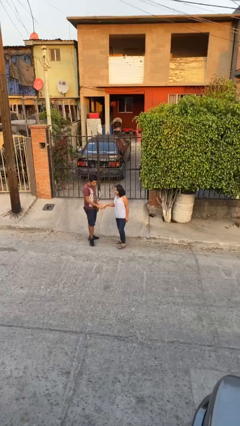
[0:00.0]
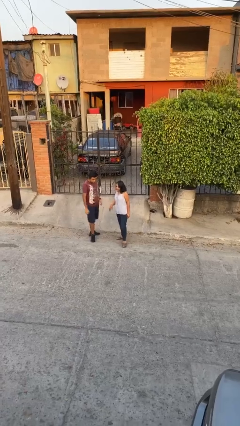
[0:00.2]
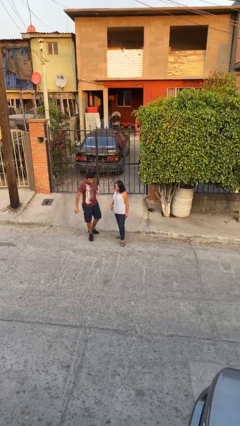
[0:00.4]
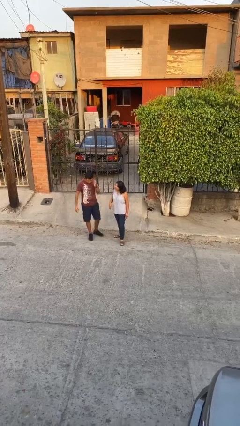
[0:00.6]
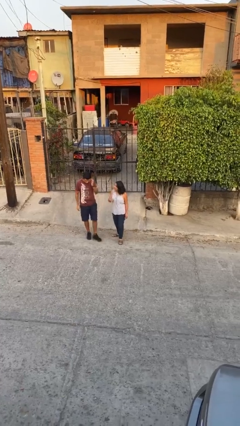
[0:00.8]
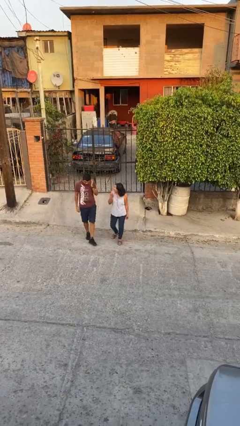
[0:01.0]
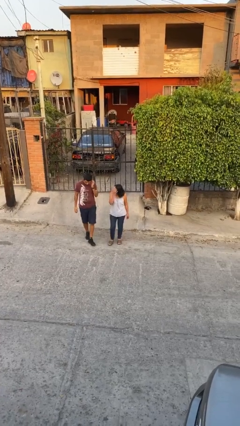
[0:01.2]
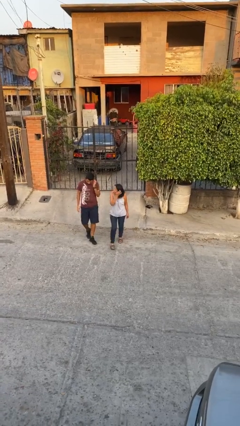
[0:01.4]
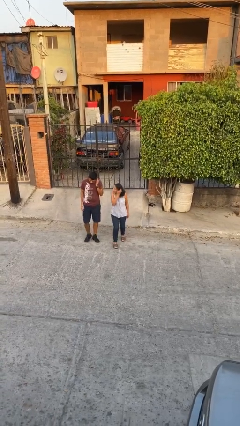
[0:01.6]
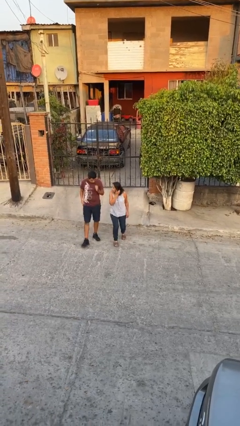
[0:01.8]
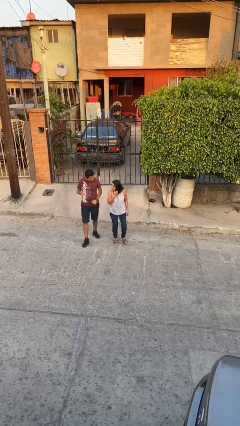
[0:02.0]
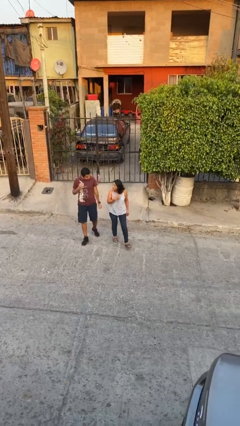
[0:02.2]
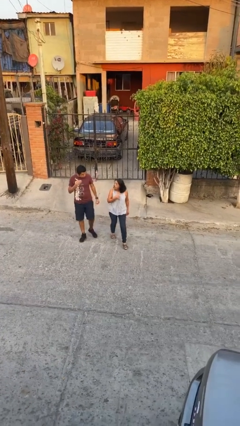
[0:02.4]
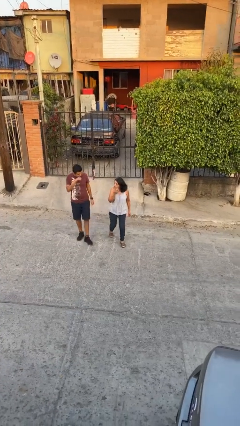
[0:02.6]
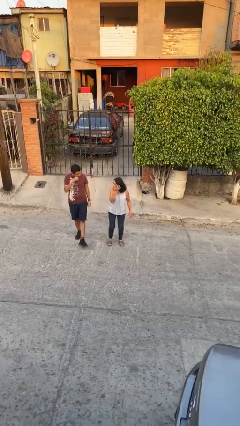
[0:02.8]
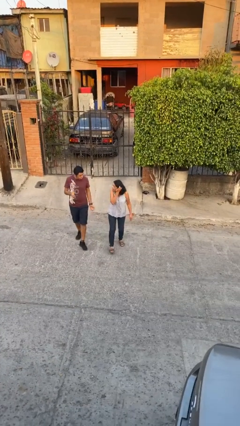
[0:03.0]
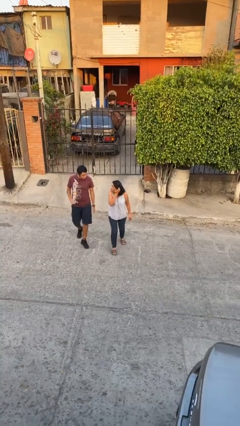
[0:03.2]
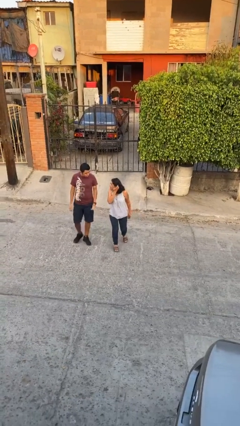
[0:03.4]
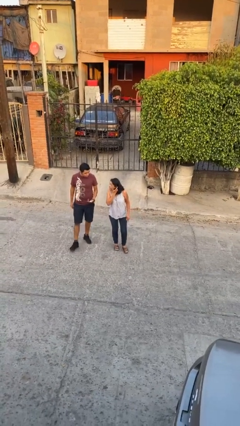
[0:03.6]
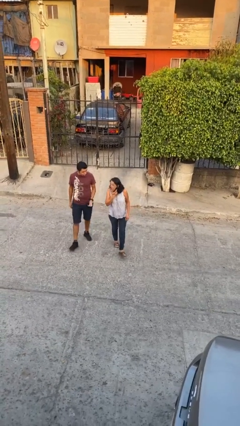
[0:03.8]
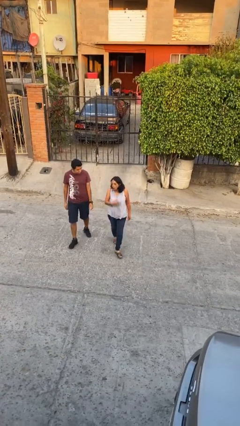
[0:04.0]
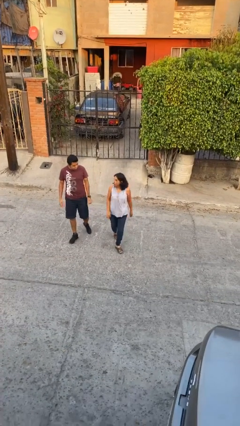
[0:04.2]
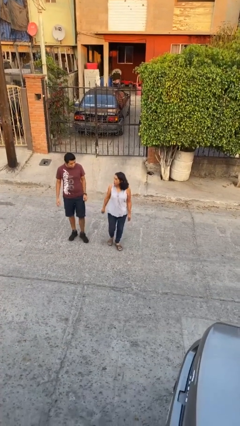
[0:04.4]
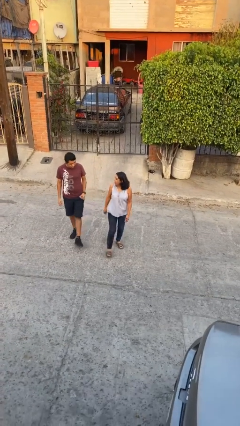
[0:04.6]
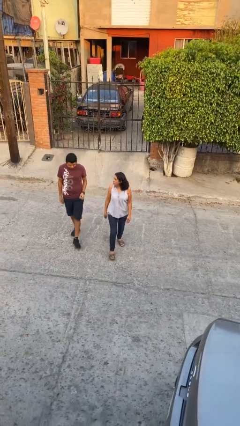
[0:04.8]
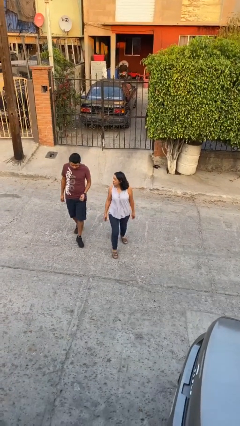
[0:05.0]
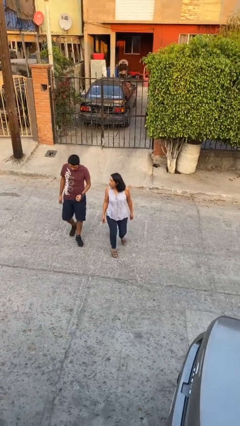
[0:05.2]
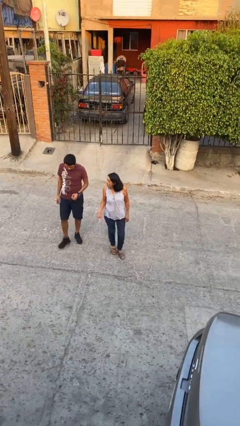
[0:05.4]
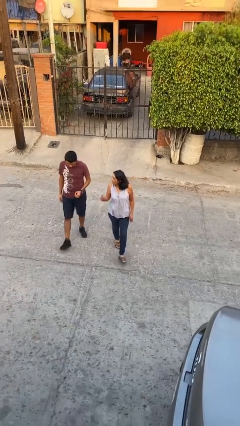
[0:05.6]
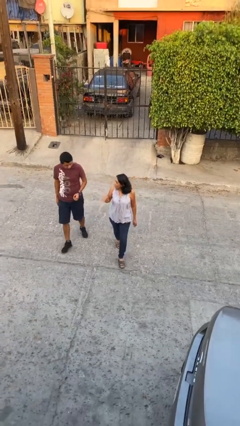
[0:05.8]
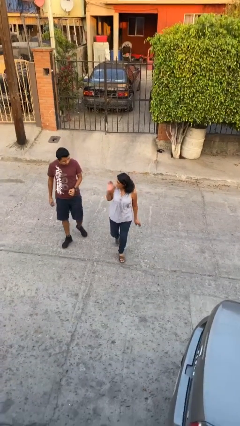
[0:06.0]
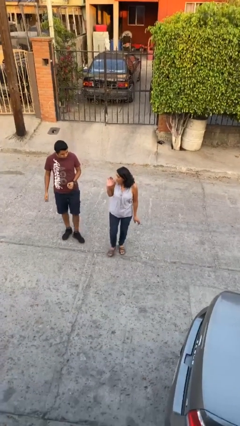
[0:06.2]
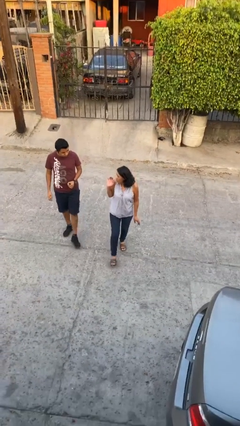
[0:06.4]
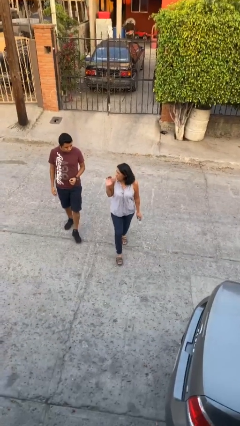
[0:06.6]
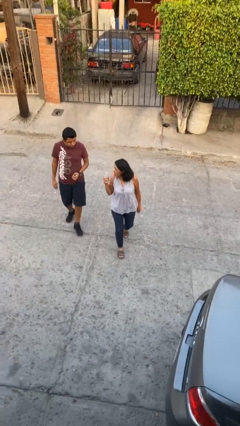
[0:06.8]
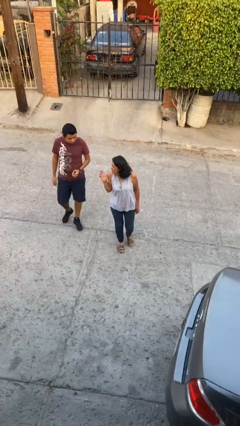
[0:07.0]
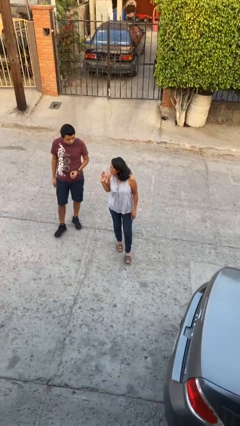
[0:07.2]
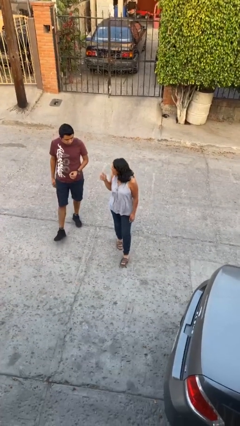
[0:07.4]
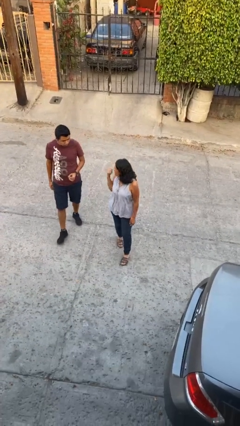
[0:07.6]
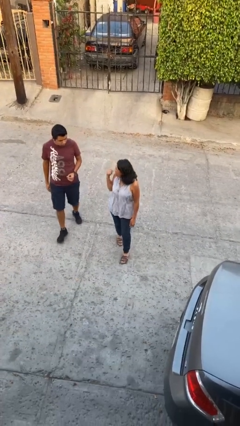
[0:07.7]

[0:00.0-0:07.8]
person talks to person

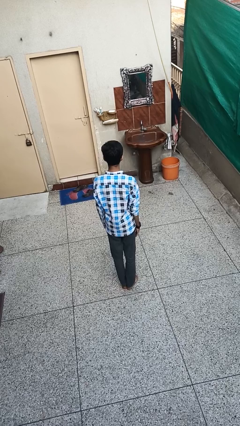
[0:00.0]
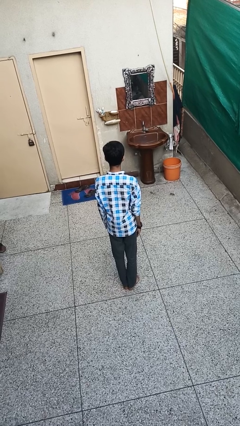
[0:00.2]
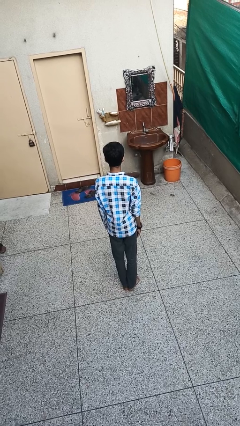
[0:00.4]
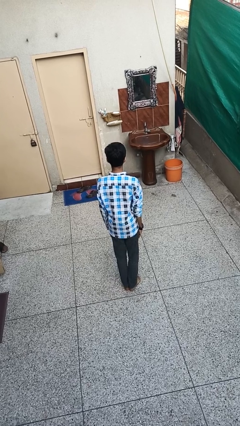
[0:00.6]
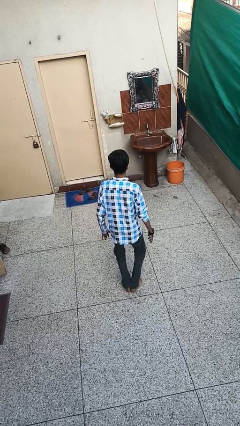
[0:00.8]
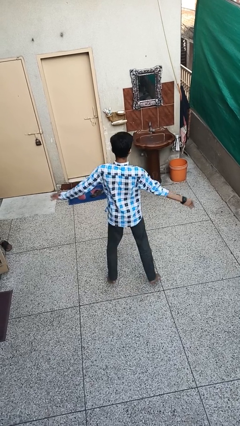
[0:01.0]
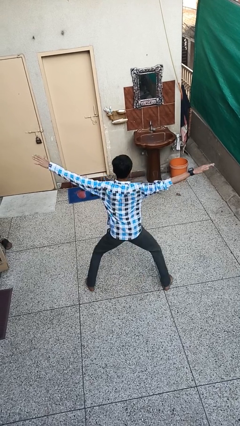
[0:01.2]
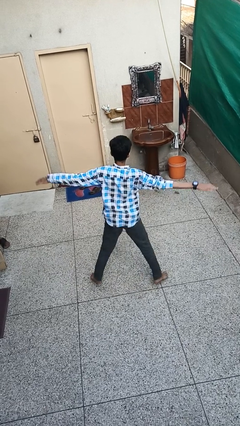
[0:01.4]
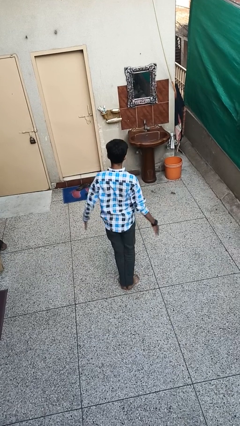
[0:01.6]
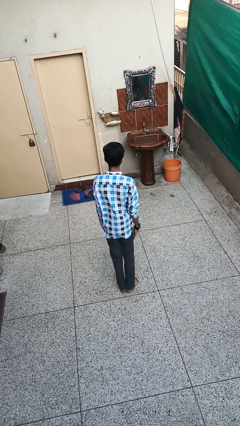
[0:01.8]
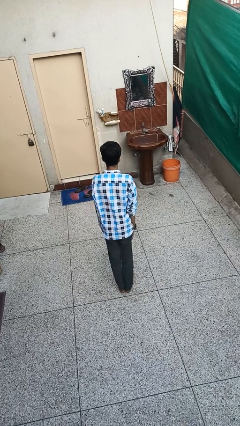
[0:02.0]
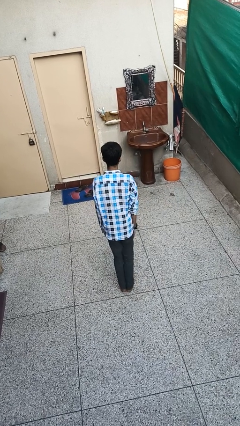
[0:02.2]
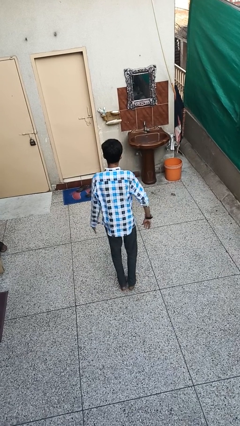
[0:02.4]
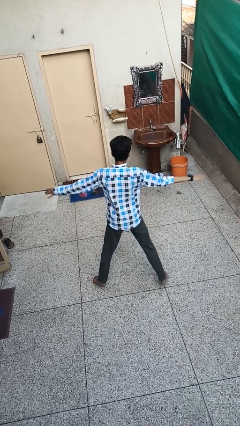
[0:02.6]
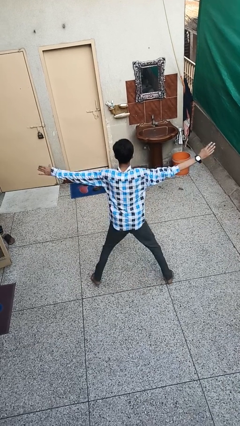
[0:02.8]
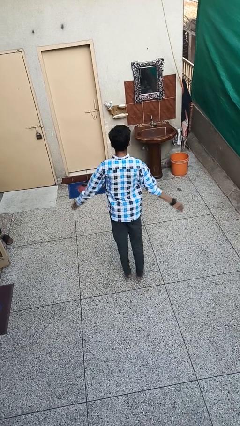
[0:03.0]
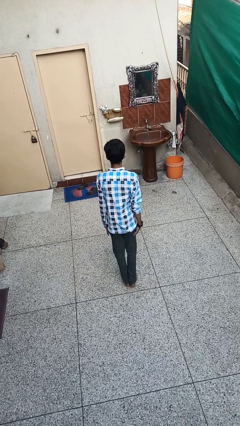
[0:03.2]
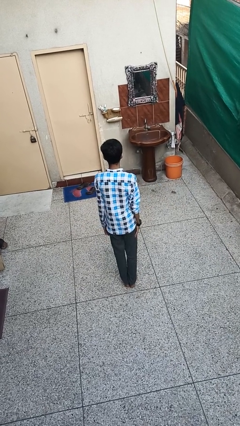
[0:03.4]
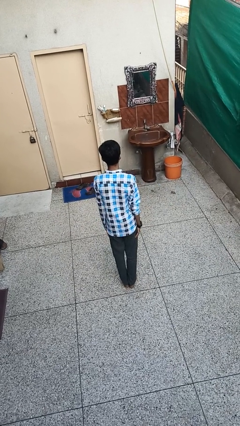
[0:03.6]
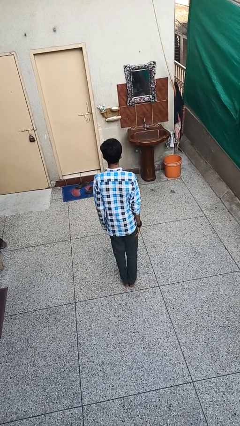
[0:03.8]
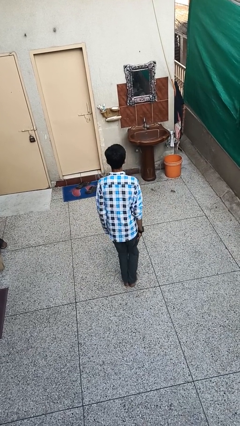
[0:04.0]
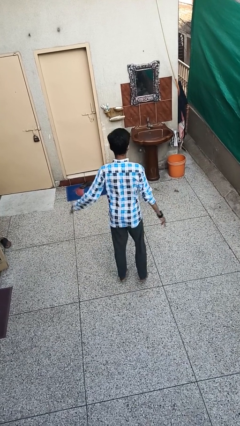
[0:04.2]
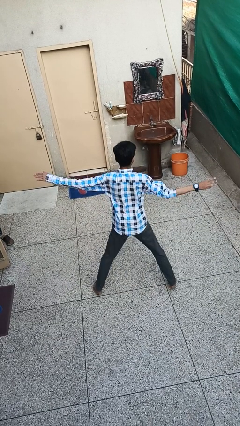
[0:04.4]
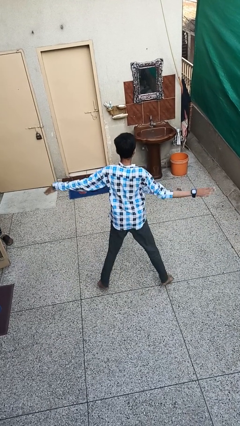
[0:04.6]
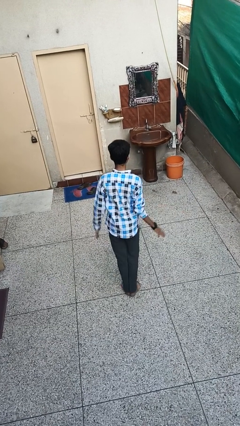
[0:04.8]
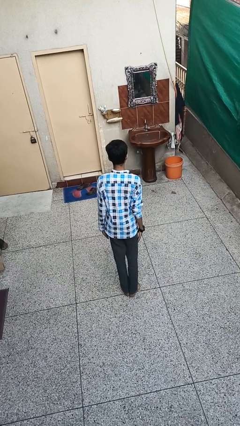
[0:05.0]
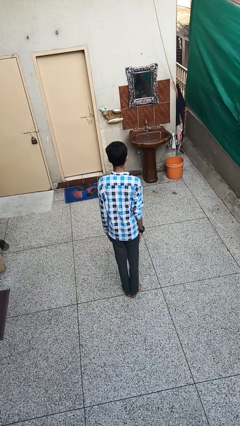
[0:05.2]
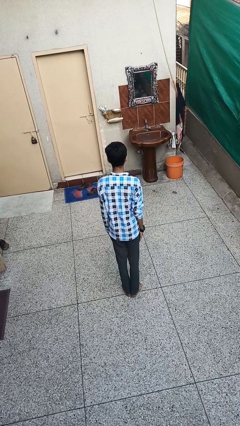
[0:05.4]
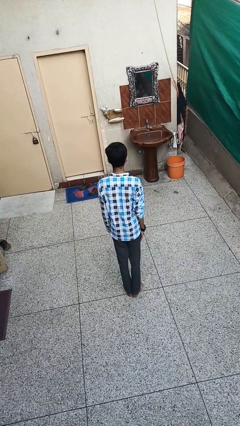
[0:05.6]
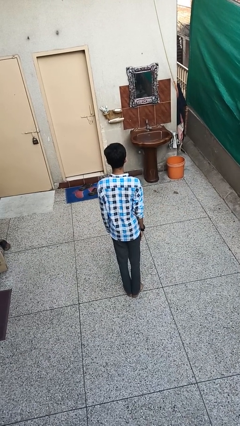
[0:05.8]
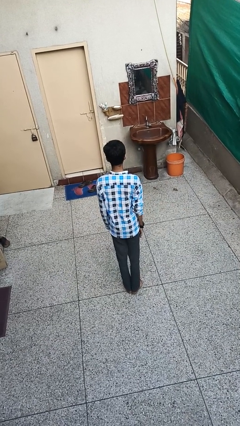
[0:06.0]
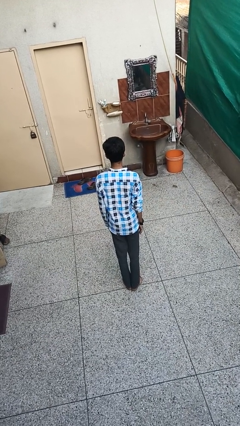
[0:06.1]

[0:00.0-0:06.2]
person exercises with jumping jacks

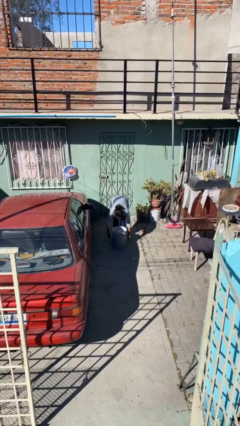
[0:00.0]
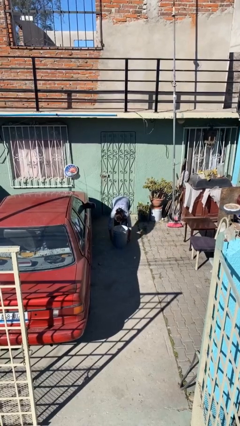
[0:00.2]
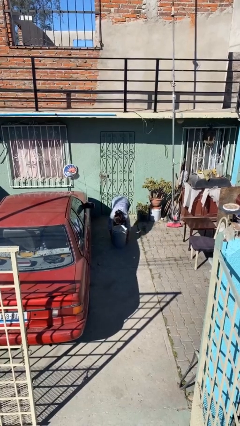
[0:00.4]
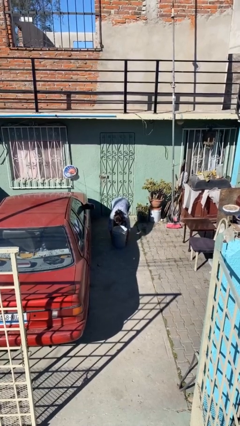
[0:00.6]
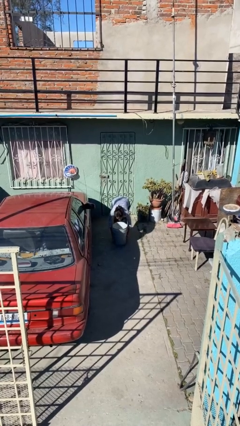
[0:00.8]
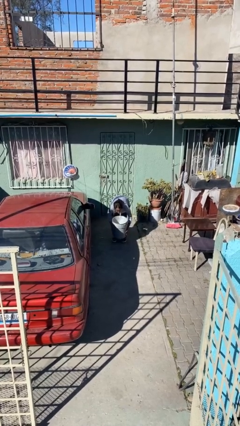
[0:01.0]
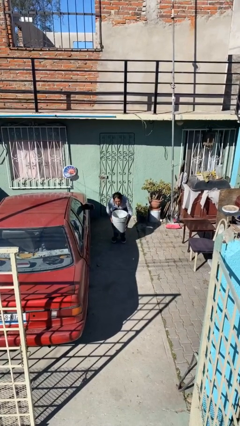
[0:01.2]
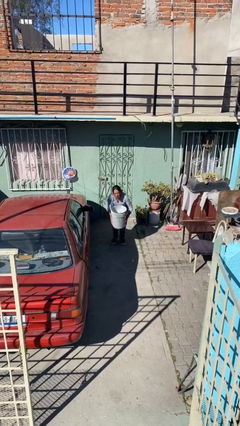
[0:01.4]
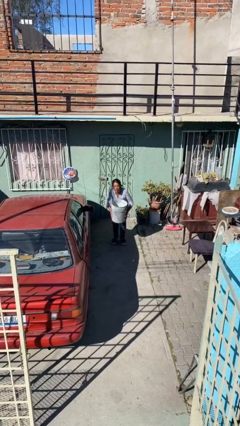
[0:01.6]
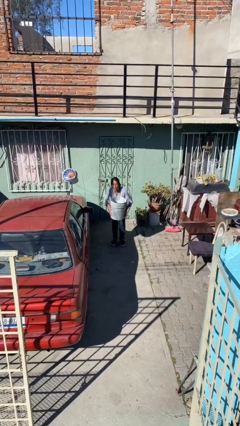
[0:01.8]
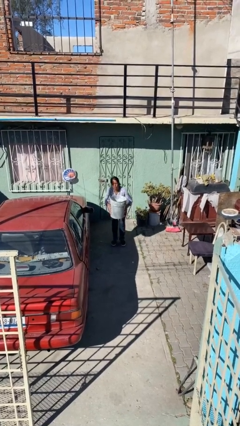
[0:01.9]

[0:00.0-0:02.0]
person picks up object from floor

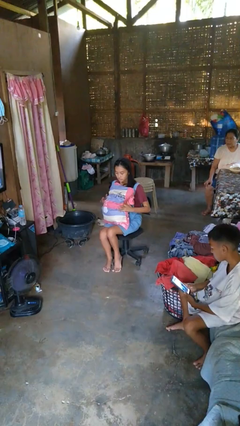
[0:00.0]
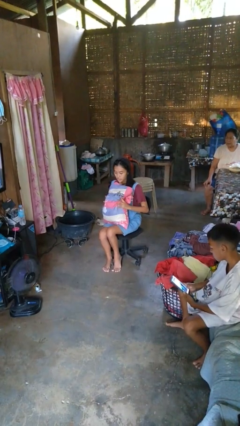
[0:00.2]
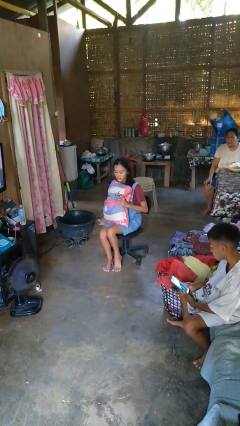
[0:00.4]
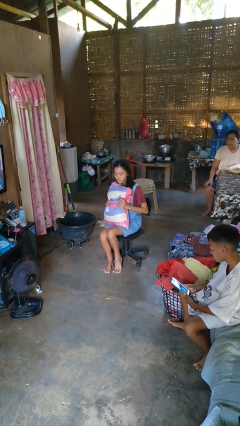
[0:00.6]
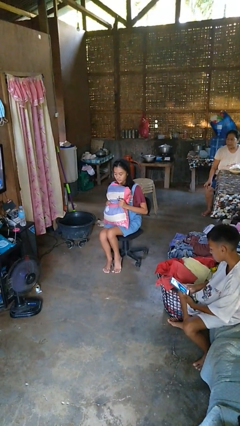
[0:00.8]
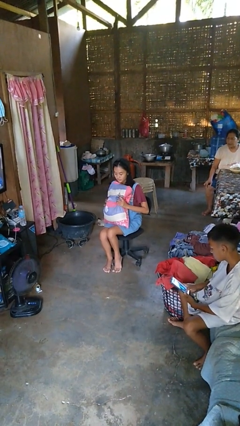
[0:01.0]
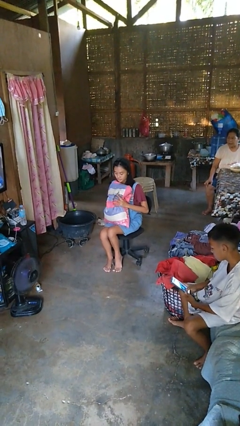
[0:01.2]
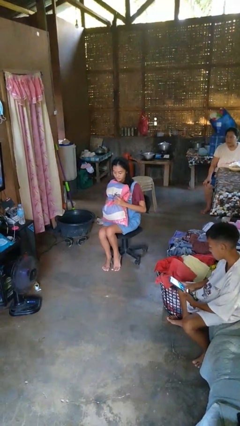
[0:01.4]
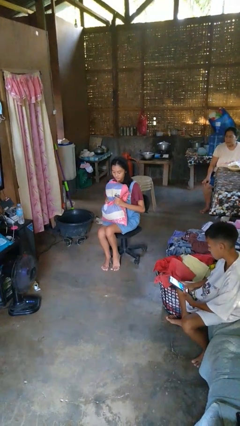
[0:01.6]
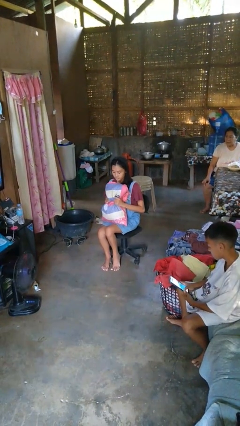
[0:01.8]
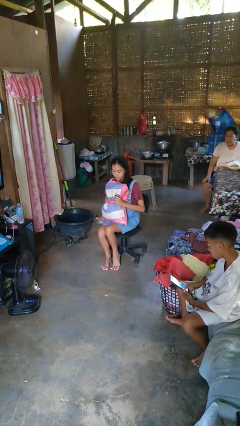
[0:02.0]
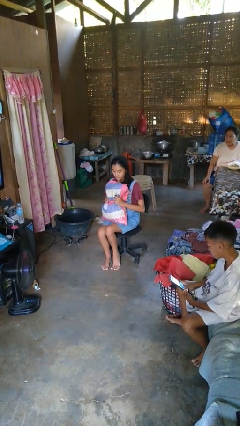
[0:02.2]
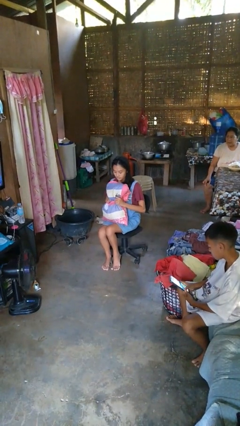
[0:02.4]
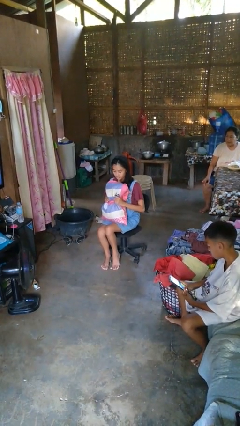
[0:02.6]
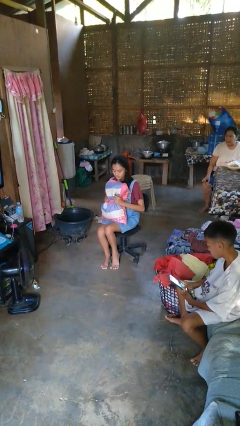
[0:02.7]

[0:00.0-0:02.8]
person squeezes object
